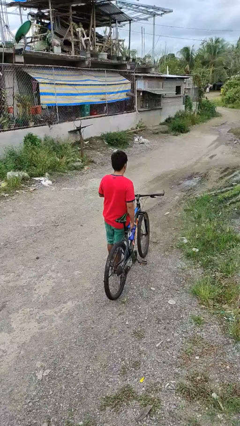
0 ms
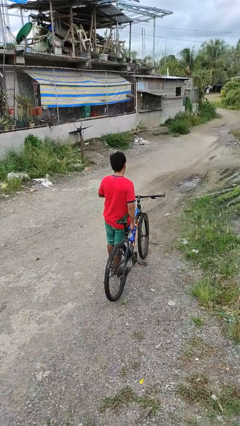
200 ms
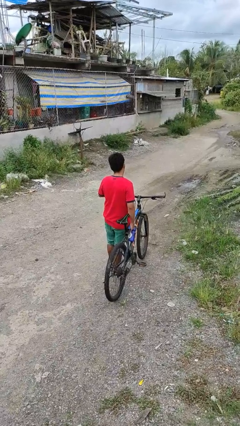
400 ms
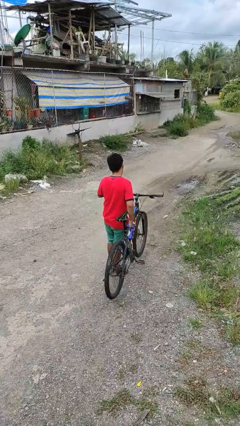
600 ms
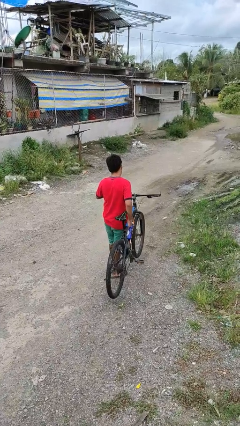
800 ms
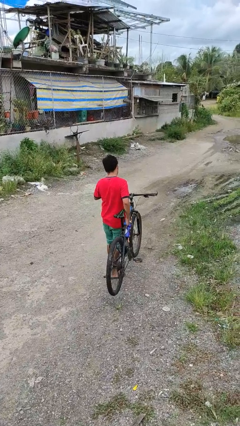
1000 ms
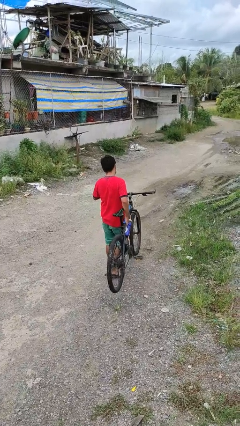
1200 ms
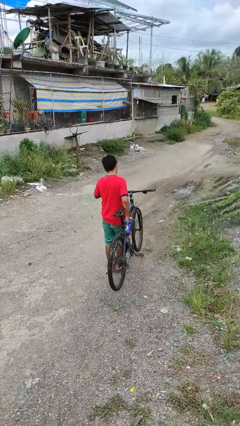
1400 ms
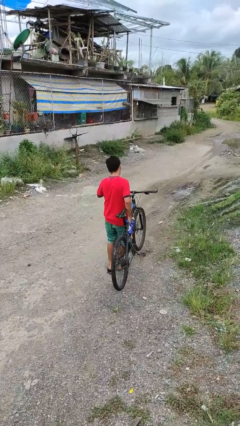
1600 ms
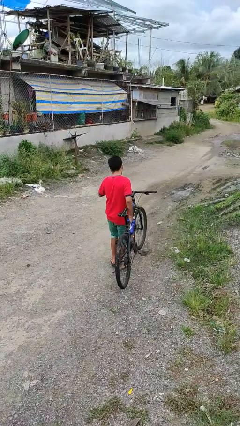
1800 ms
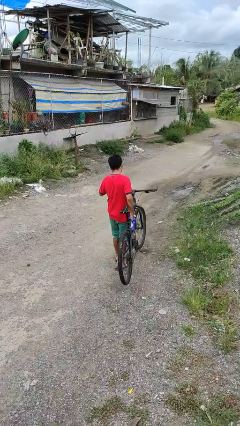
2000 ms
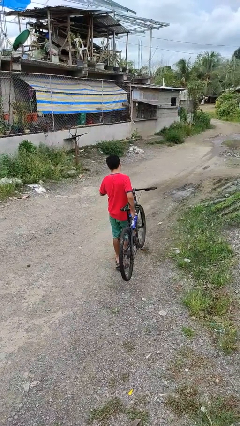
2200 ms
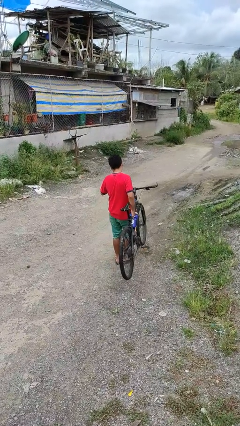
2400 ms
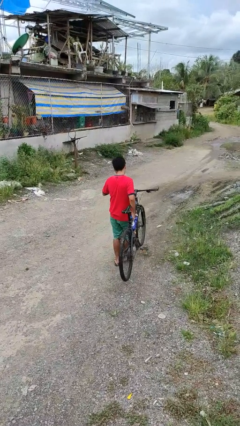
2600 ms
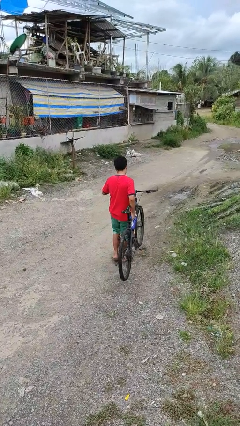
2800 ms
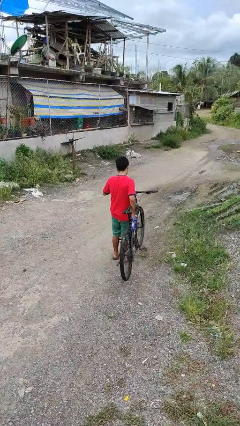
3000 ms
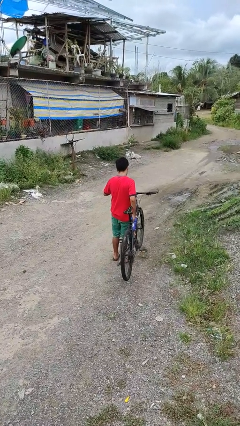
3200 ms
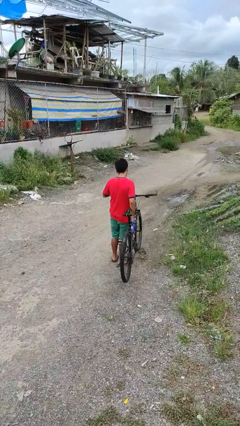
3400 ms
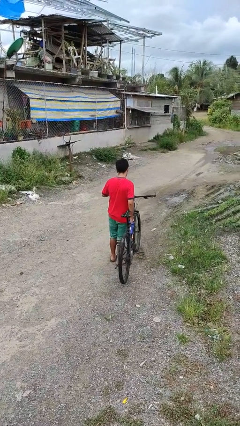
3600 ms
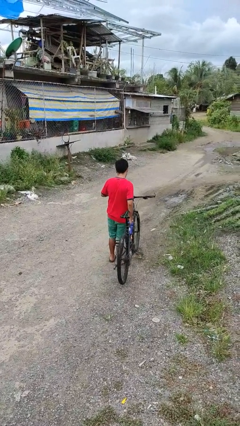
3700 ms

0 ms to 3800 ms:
person carries bicycle

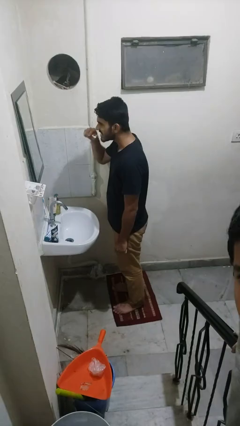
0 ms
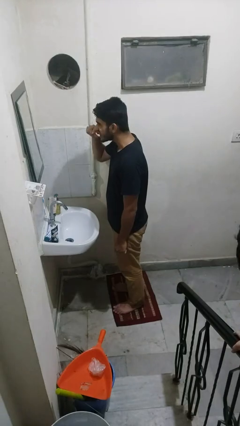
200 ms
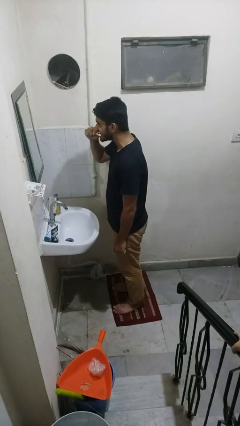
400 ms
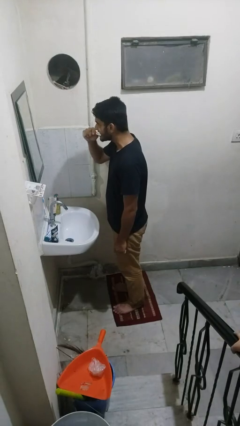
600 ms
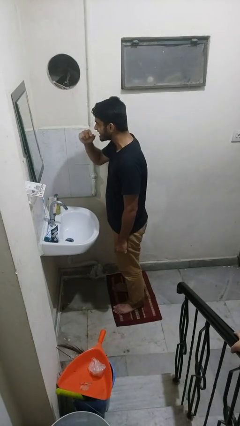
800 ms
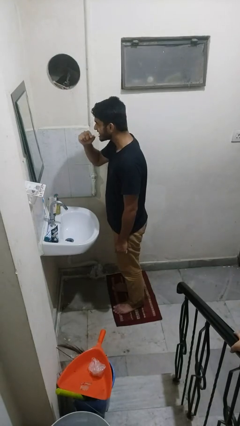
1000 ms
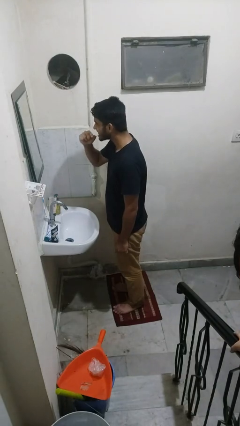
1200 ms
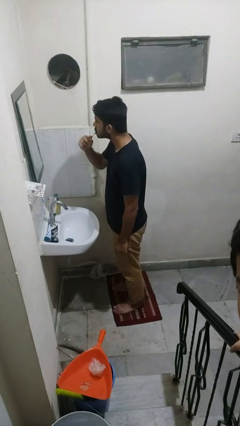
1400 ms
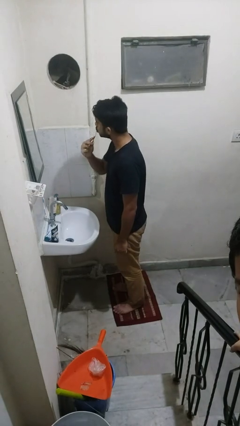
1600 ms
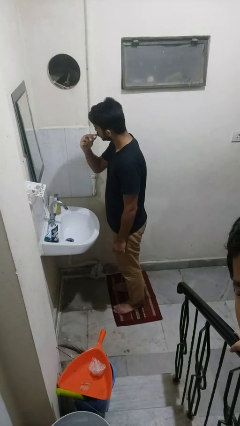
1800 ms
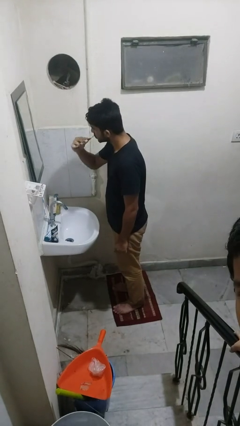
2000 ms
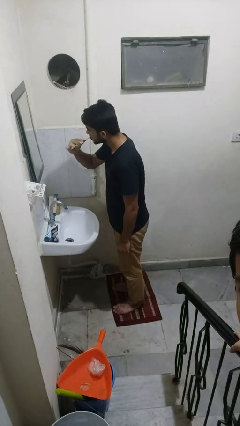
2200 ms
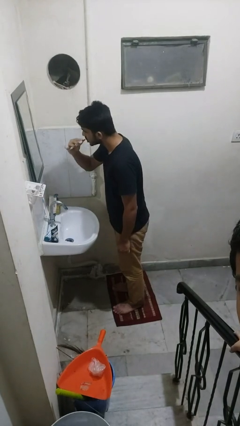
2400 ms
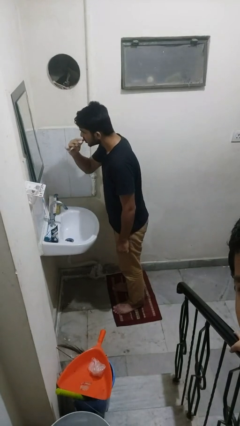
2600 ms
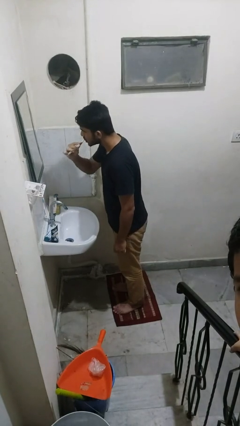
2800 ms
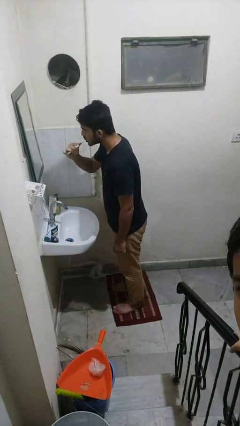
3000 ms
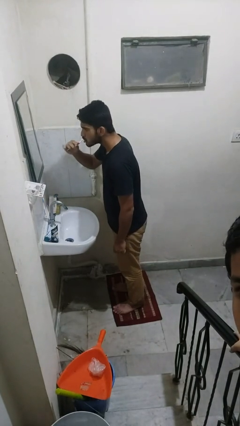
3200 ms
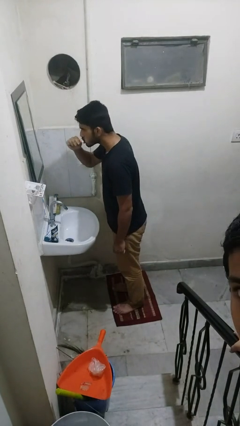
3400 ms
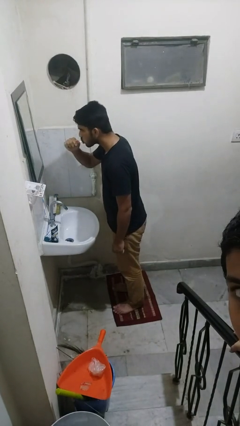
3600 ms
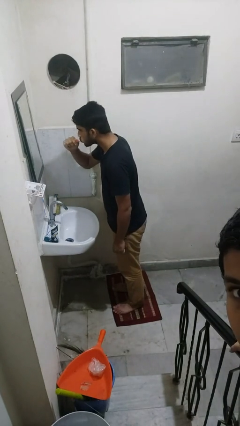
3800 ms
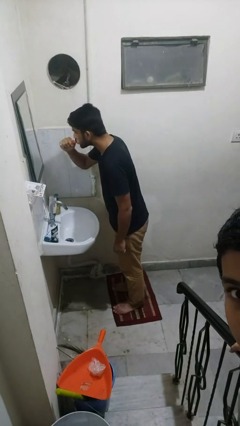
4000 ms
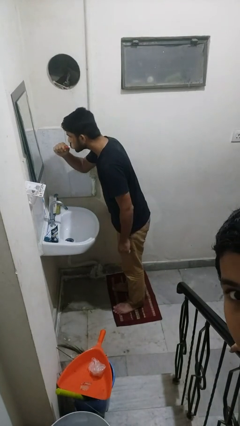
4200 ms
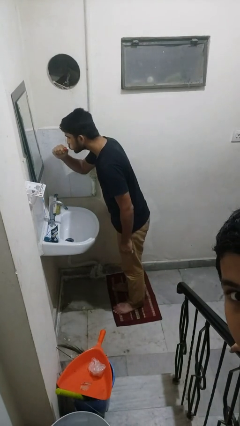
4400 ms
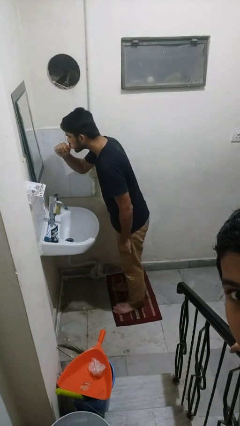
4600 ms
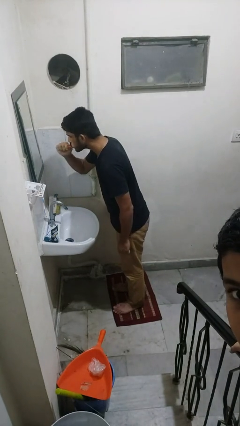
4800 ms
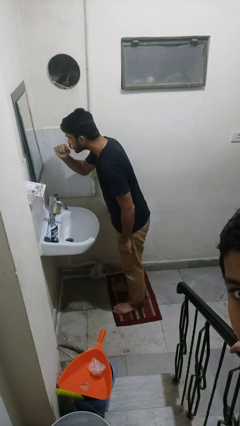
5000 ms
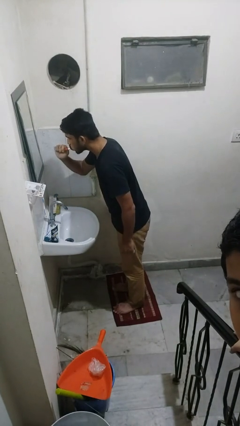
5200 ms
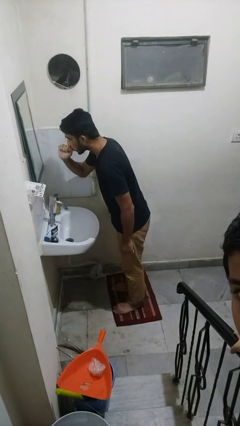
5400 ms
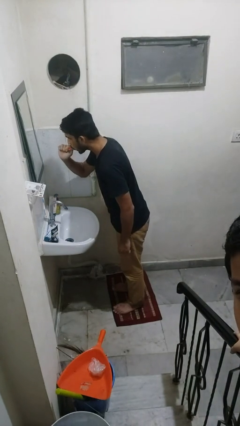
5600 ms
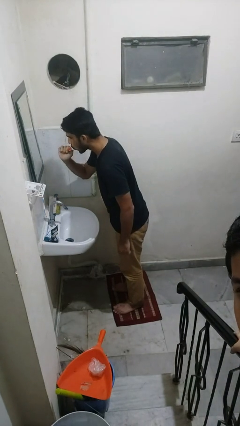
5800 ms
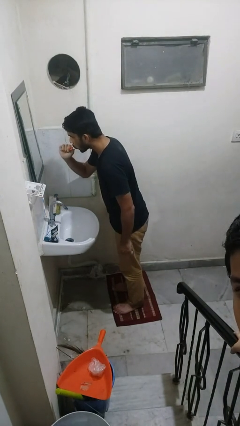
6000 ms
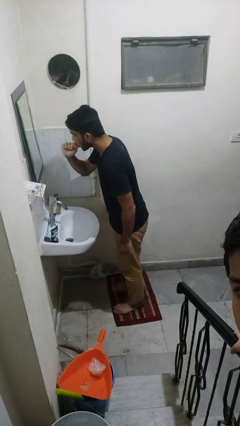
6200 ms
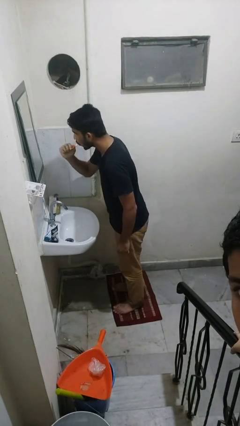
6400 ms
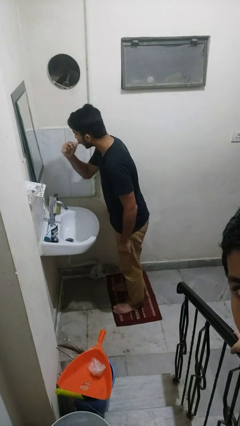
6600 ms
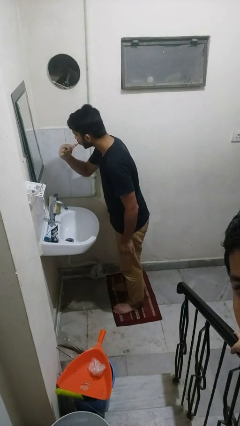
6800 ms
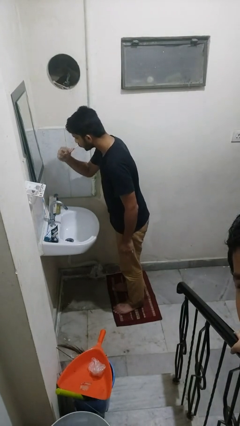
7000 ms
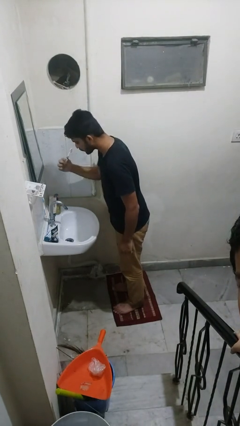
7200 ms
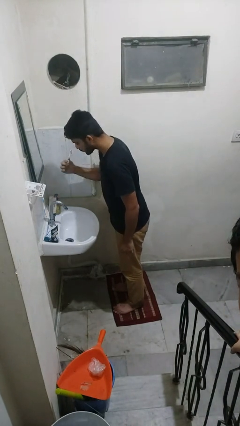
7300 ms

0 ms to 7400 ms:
person brushes teeth

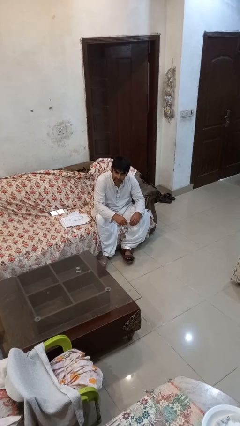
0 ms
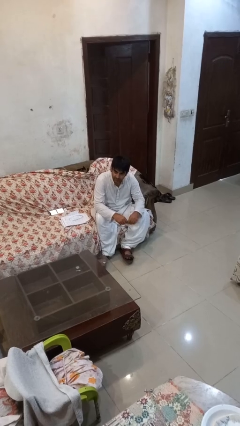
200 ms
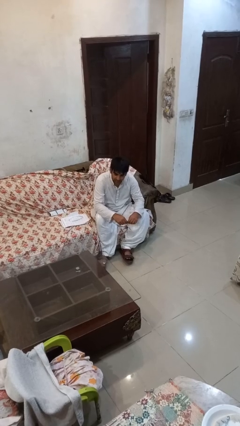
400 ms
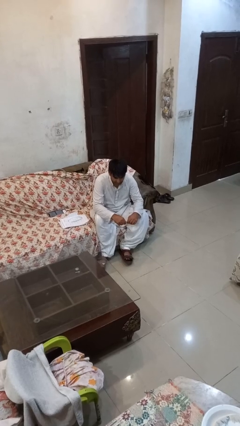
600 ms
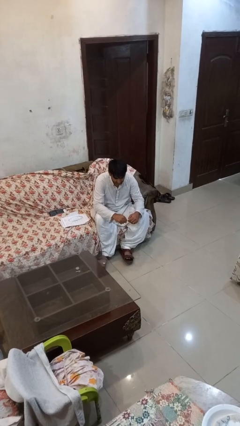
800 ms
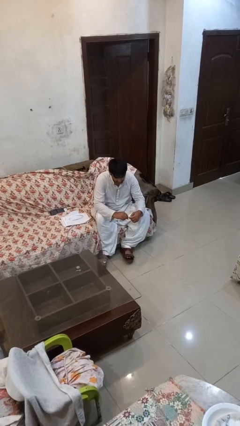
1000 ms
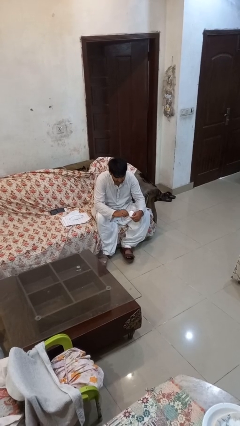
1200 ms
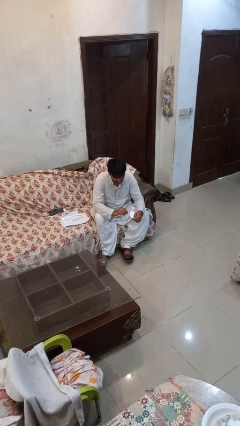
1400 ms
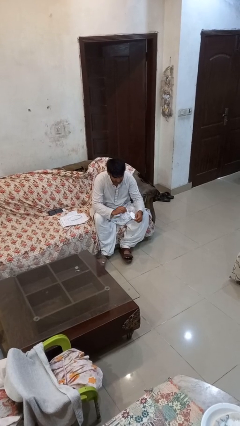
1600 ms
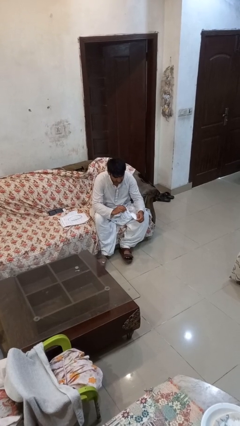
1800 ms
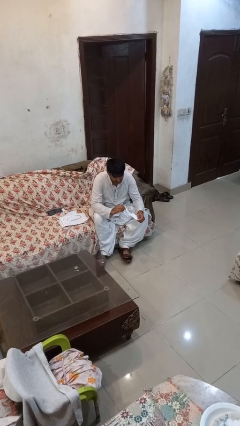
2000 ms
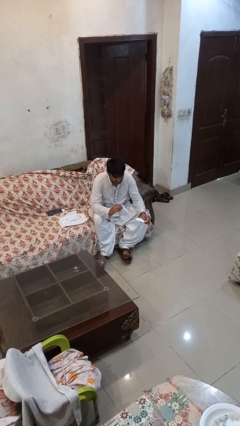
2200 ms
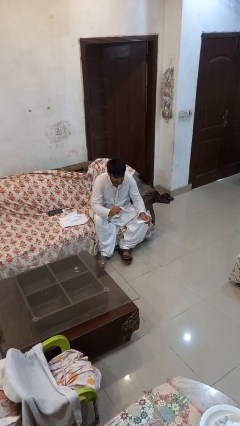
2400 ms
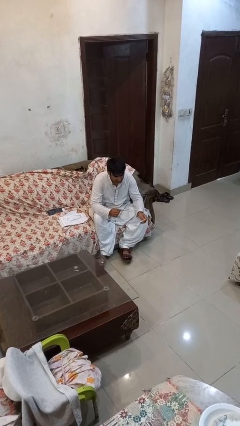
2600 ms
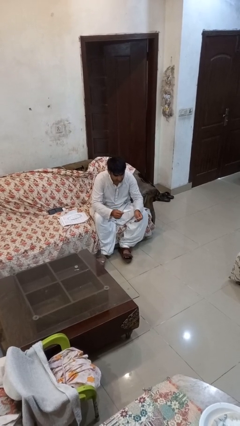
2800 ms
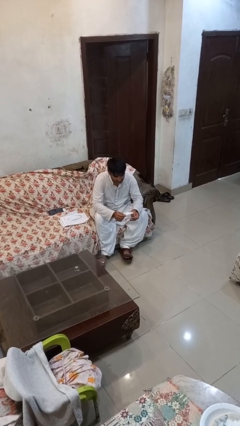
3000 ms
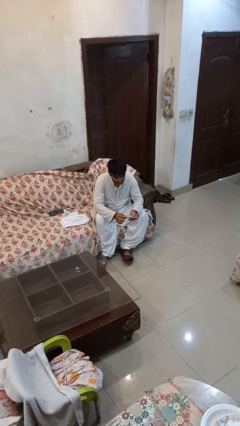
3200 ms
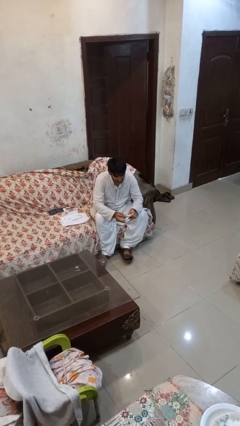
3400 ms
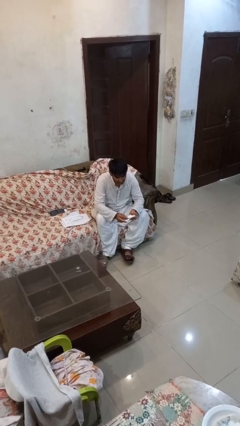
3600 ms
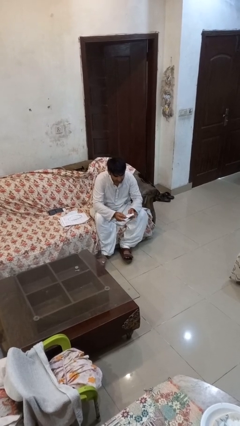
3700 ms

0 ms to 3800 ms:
person tears paper

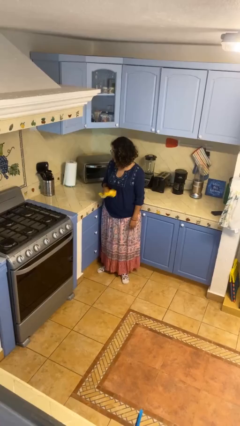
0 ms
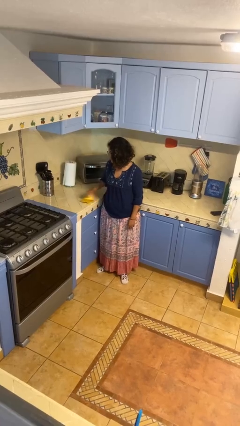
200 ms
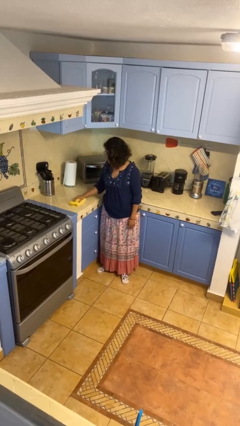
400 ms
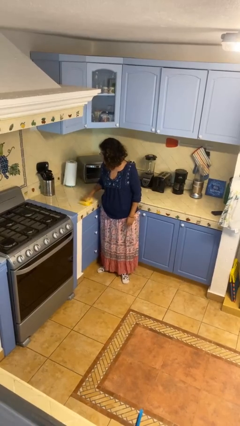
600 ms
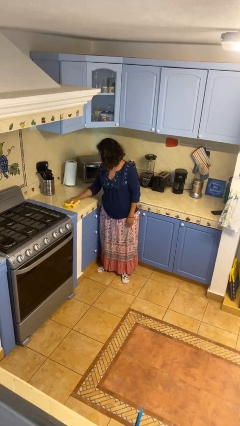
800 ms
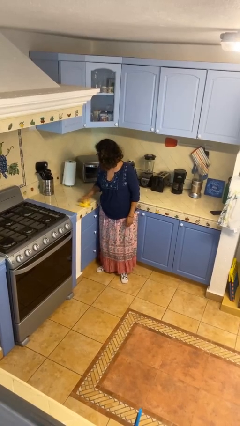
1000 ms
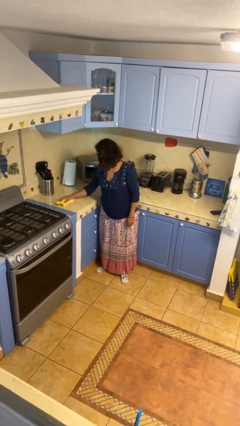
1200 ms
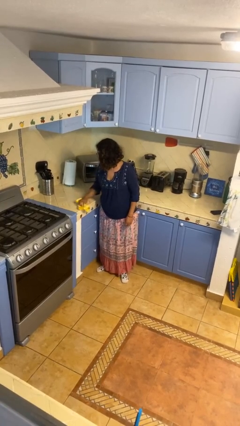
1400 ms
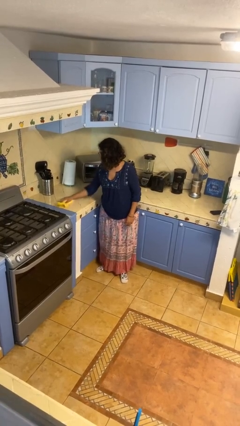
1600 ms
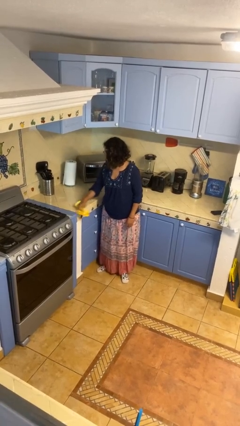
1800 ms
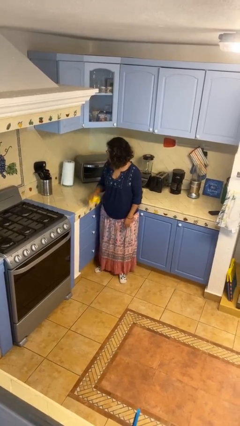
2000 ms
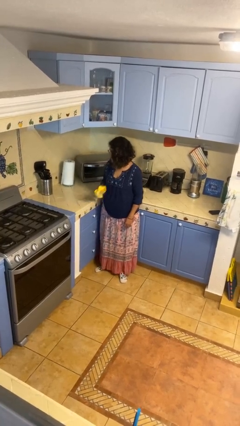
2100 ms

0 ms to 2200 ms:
person cleans table with rag

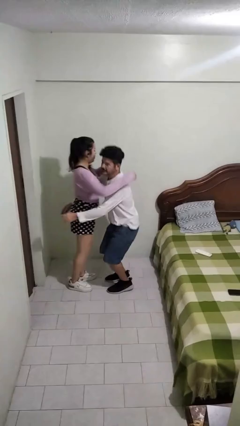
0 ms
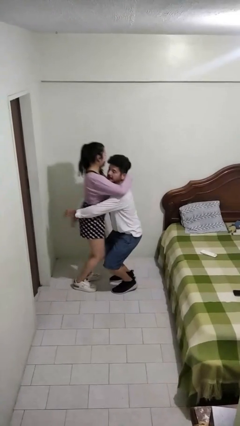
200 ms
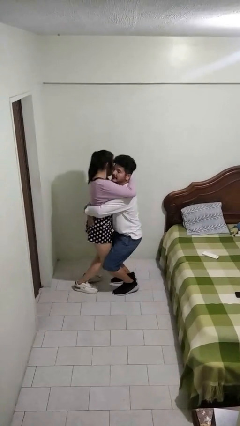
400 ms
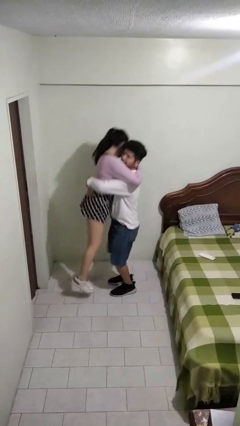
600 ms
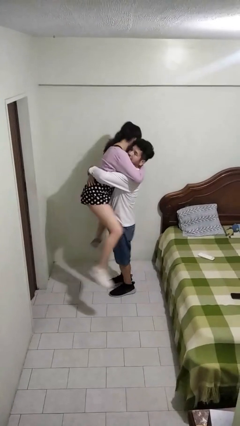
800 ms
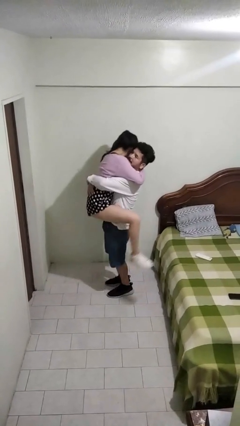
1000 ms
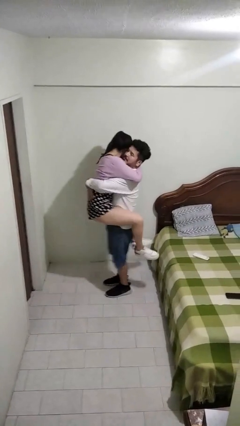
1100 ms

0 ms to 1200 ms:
person picks up person
